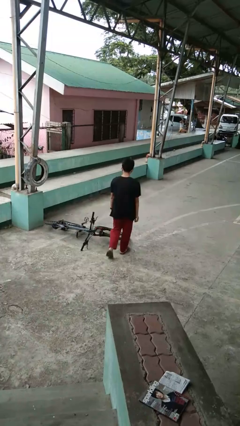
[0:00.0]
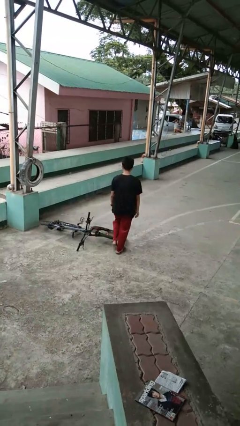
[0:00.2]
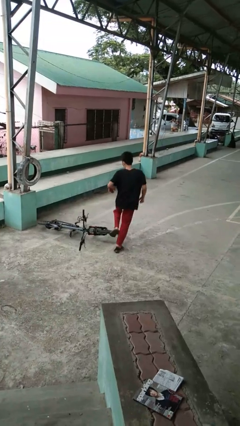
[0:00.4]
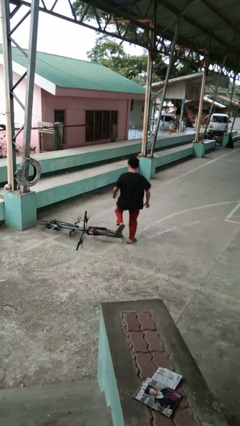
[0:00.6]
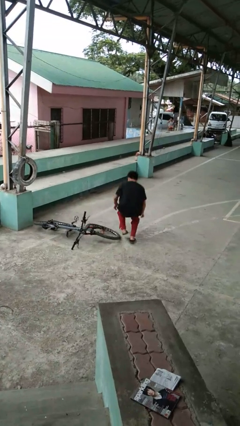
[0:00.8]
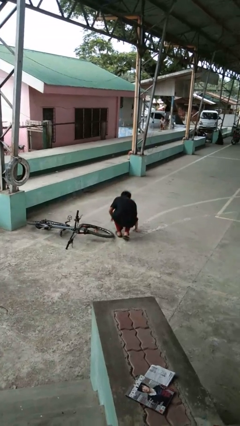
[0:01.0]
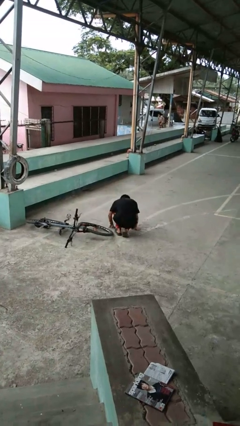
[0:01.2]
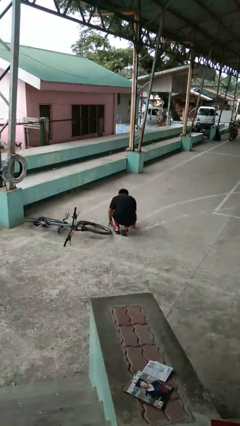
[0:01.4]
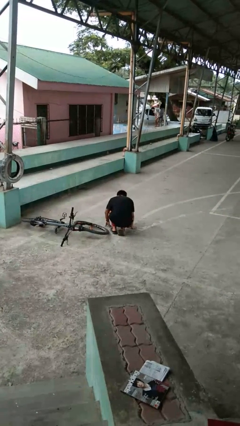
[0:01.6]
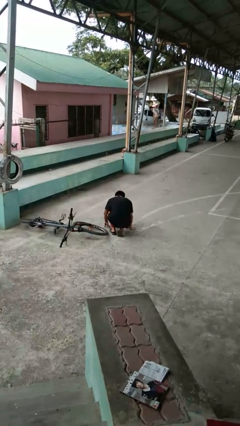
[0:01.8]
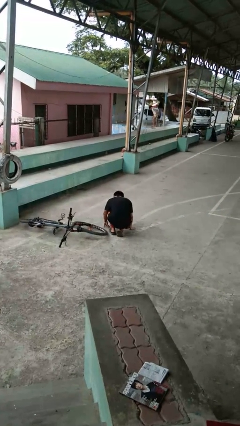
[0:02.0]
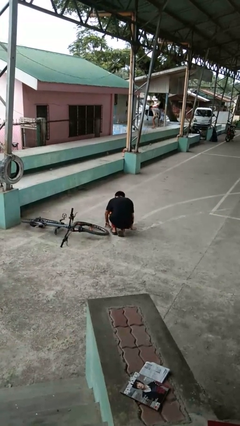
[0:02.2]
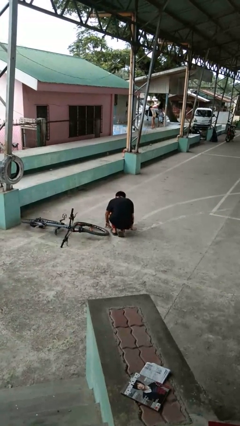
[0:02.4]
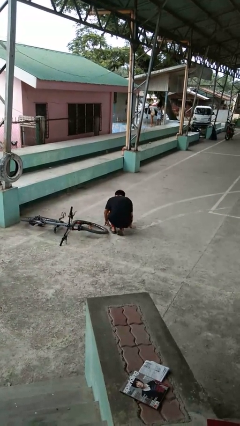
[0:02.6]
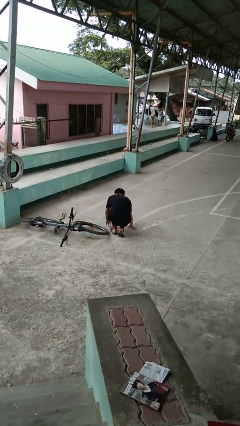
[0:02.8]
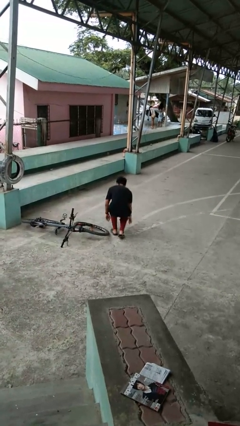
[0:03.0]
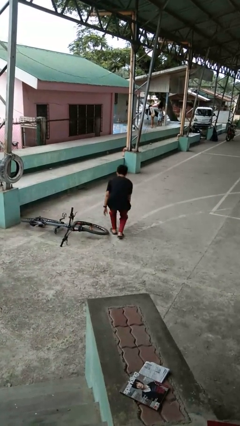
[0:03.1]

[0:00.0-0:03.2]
person trips on object on floor

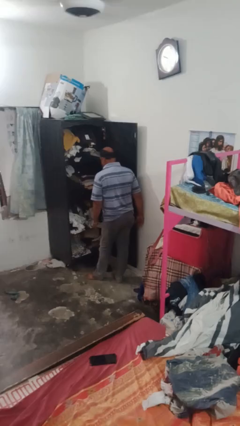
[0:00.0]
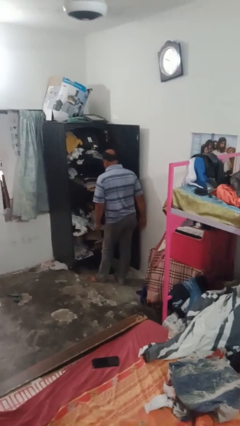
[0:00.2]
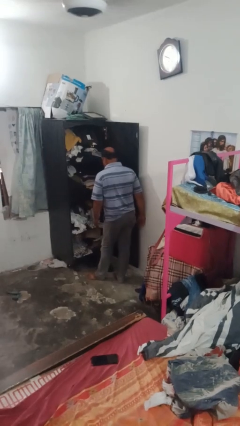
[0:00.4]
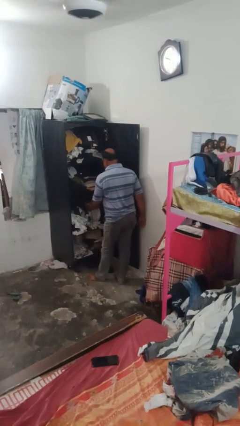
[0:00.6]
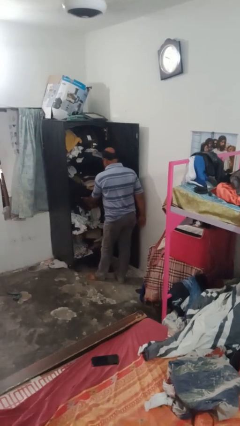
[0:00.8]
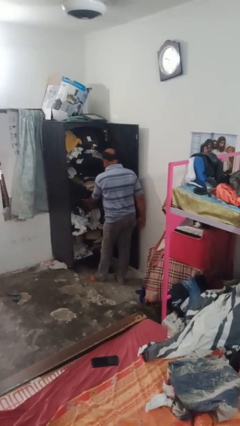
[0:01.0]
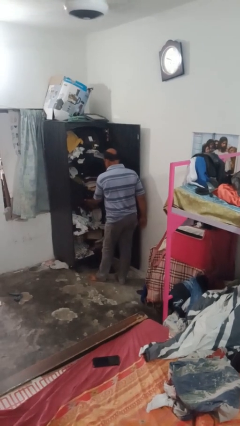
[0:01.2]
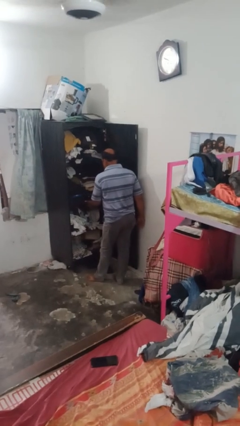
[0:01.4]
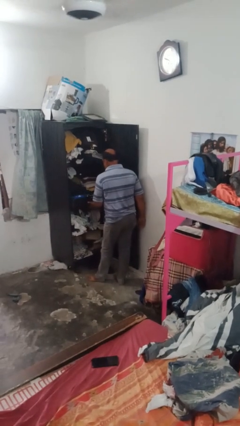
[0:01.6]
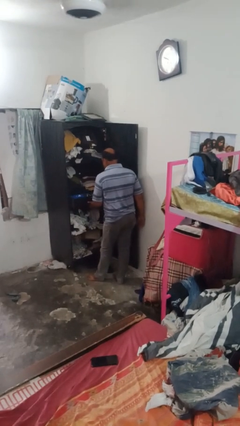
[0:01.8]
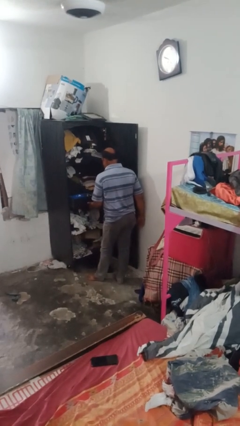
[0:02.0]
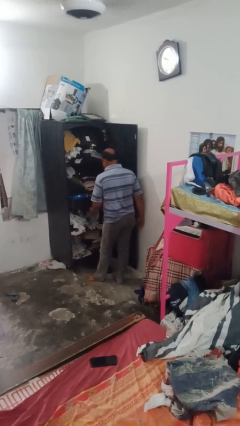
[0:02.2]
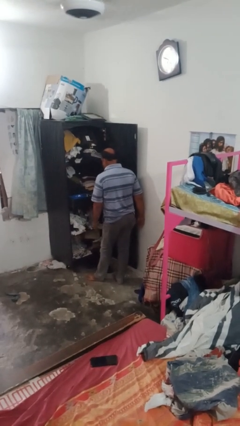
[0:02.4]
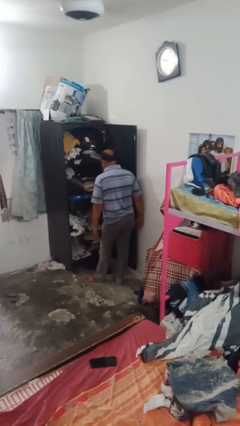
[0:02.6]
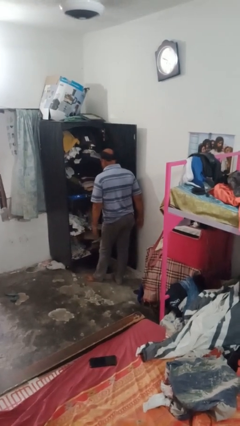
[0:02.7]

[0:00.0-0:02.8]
person opens dresser drawer

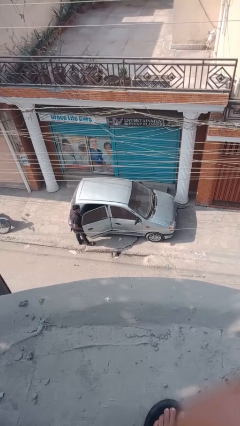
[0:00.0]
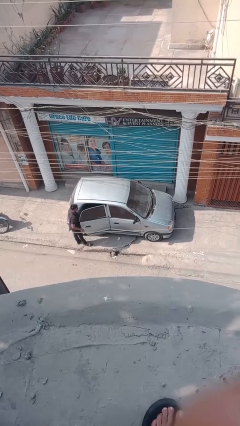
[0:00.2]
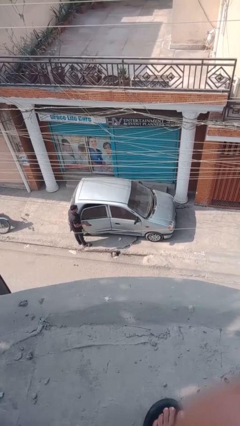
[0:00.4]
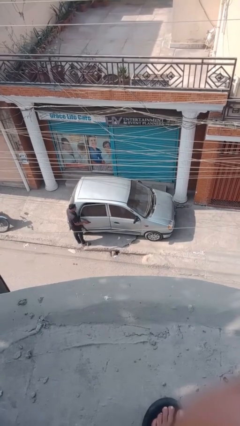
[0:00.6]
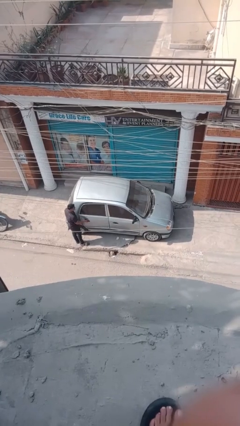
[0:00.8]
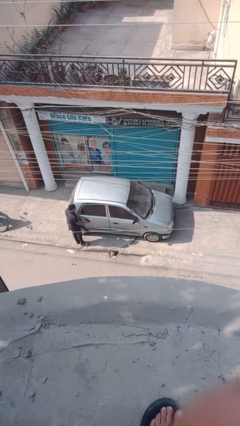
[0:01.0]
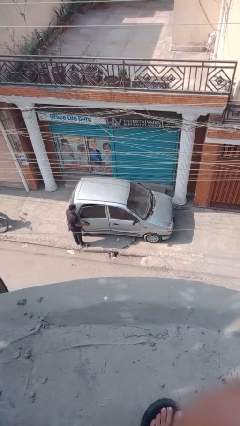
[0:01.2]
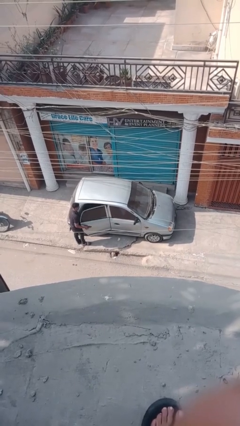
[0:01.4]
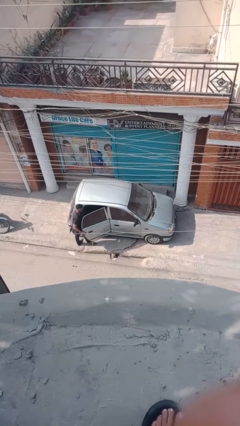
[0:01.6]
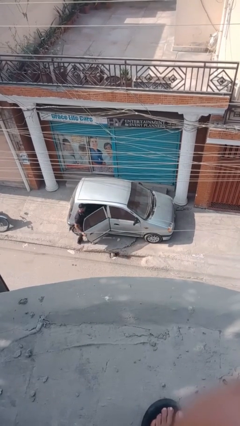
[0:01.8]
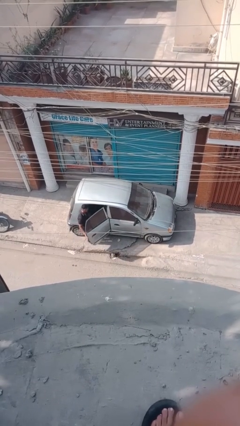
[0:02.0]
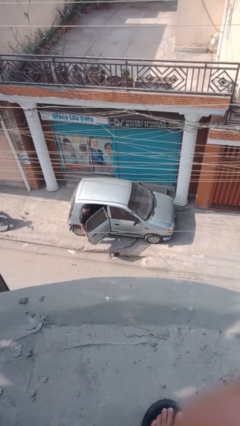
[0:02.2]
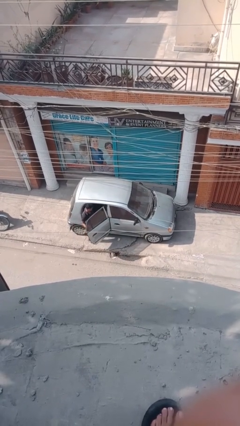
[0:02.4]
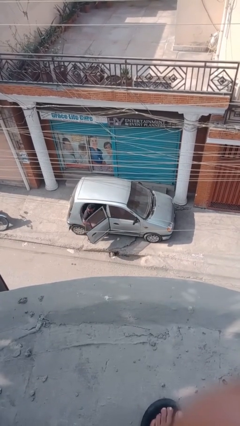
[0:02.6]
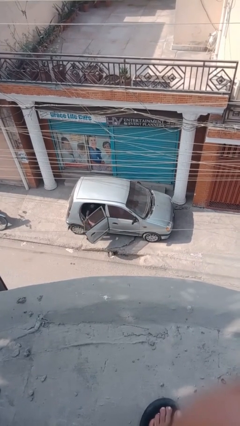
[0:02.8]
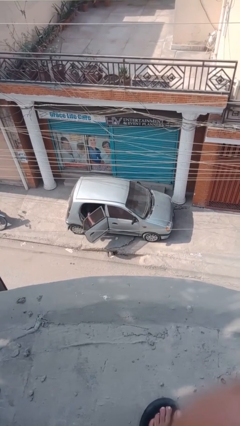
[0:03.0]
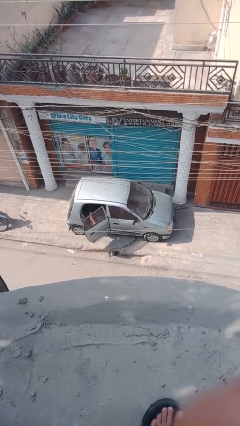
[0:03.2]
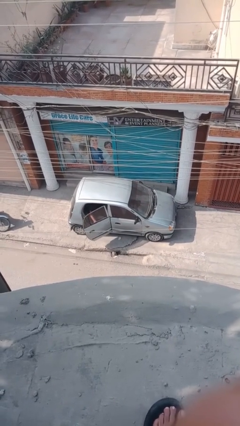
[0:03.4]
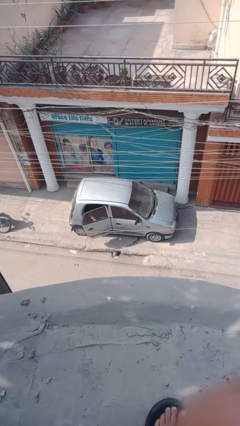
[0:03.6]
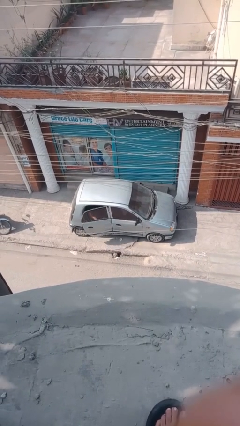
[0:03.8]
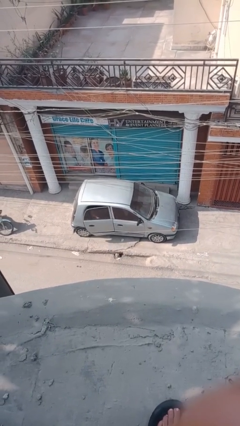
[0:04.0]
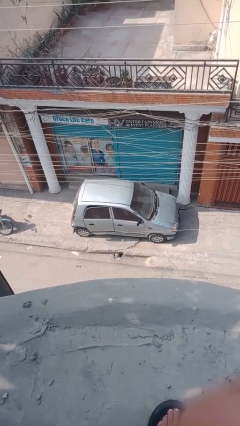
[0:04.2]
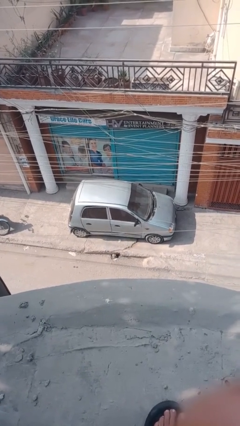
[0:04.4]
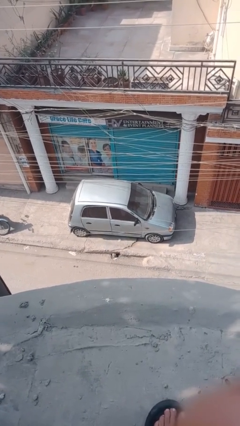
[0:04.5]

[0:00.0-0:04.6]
car picks up person

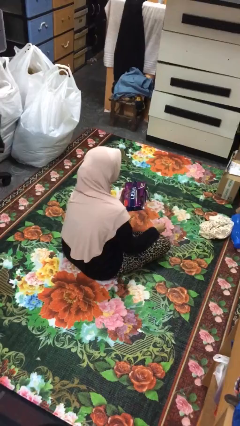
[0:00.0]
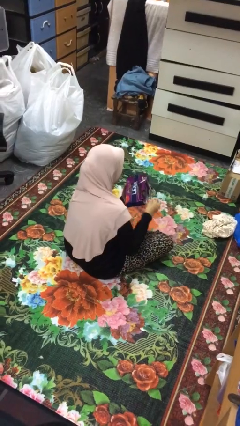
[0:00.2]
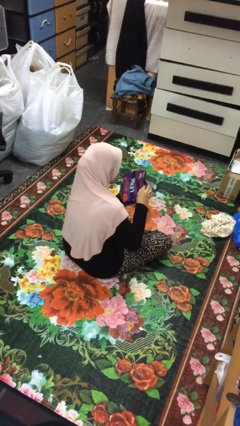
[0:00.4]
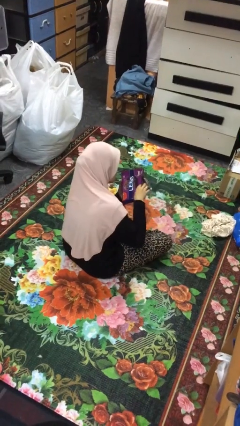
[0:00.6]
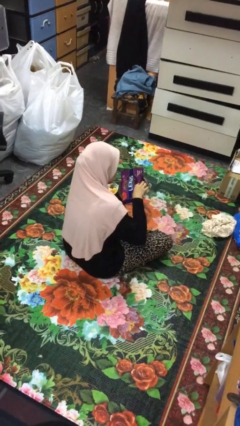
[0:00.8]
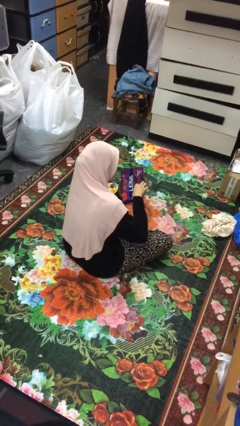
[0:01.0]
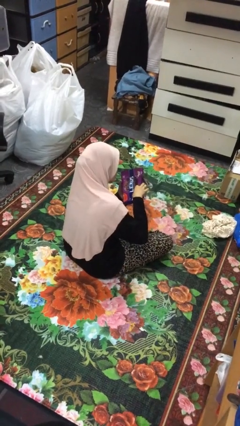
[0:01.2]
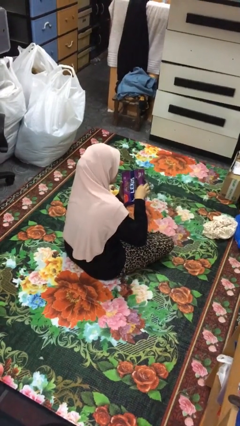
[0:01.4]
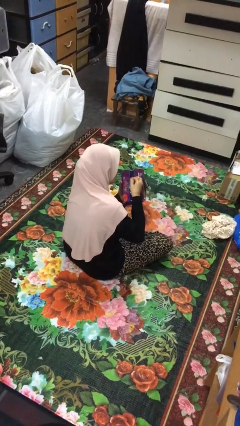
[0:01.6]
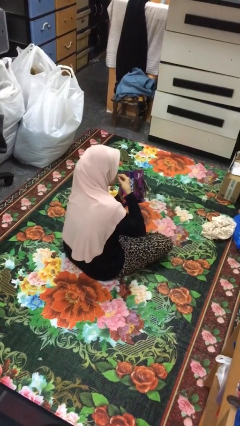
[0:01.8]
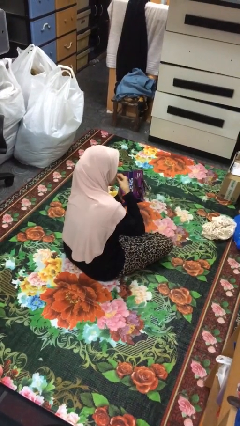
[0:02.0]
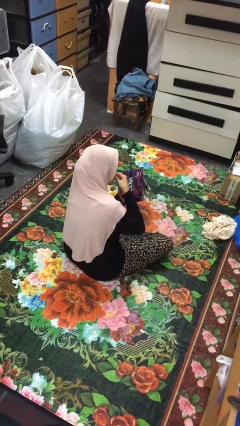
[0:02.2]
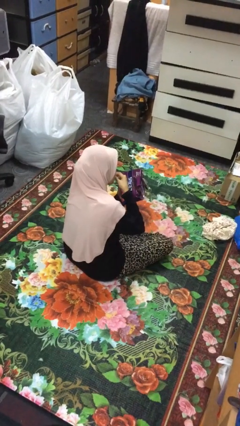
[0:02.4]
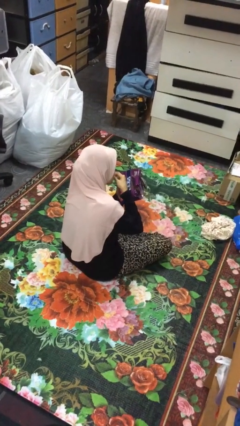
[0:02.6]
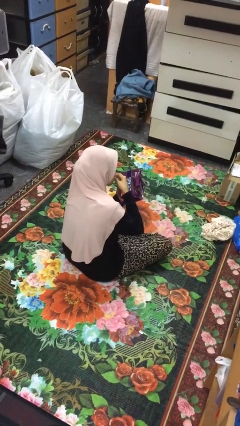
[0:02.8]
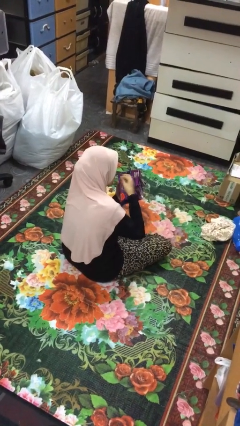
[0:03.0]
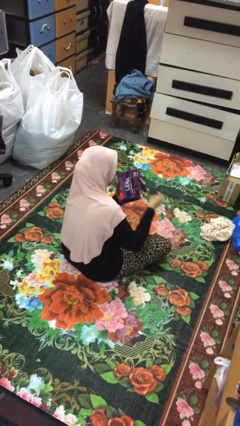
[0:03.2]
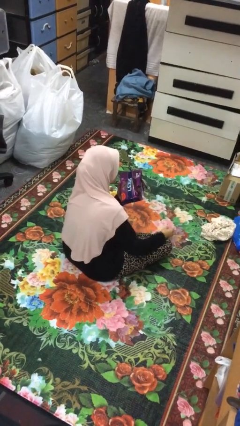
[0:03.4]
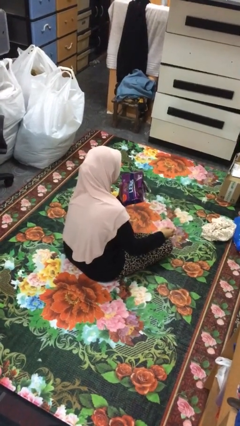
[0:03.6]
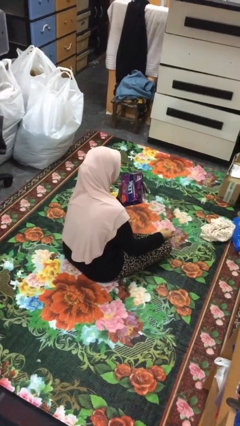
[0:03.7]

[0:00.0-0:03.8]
person eats snack from bag

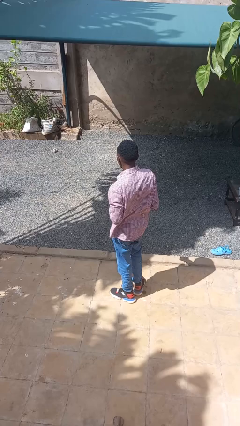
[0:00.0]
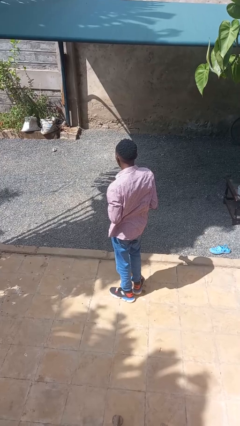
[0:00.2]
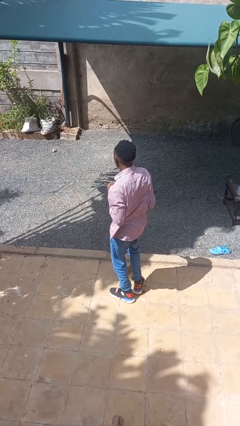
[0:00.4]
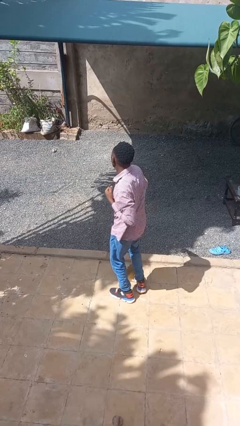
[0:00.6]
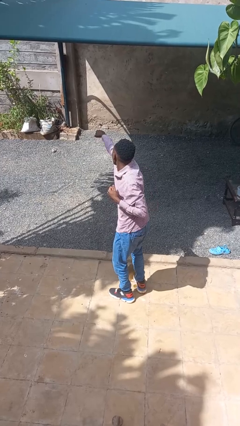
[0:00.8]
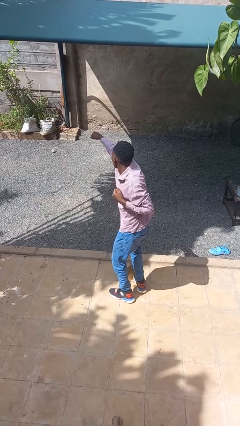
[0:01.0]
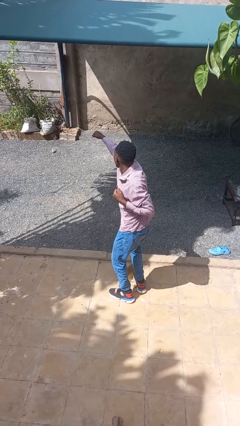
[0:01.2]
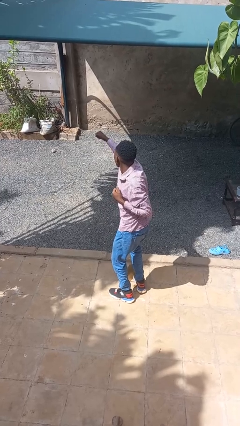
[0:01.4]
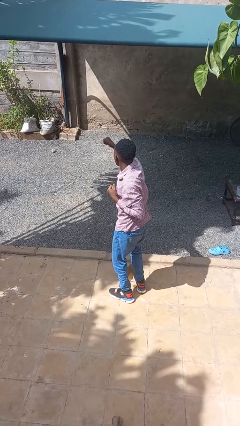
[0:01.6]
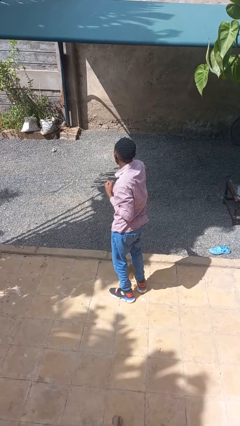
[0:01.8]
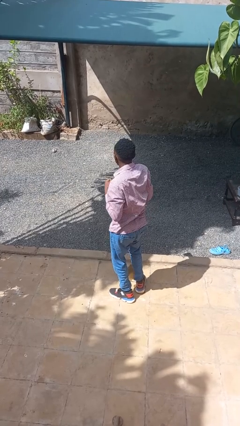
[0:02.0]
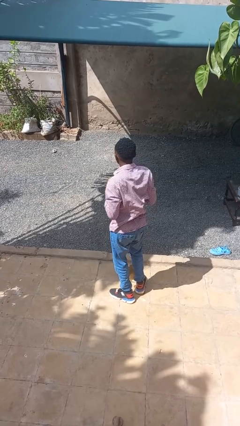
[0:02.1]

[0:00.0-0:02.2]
person punches

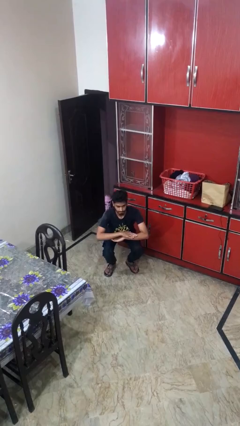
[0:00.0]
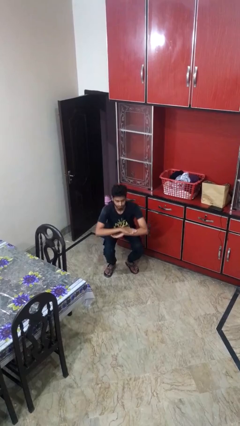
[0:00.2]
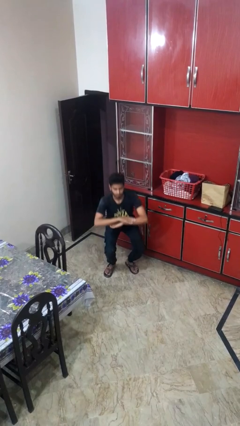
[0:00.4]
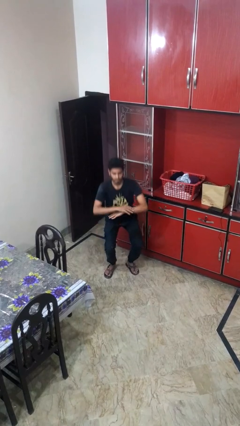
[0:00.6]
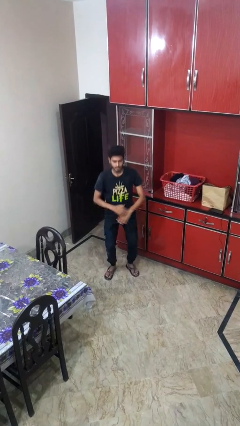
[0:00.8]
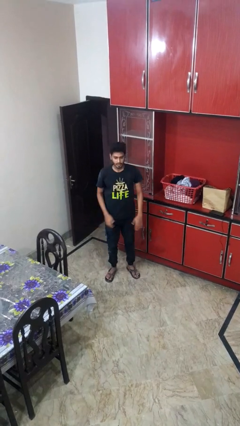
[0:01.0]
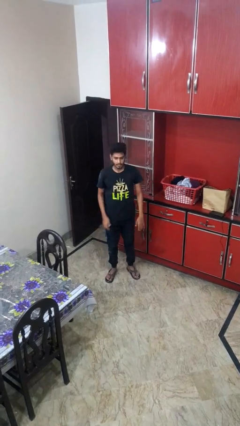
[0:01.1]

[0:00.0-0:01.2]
person stands up
